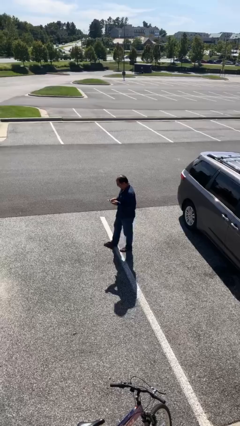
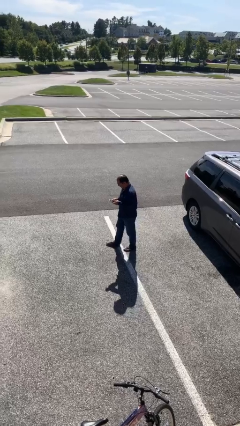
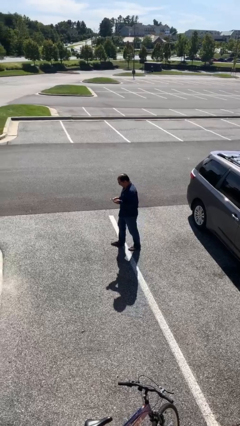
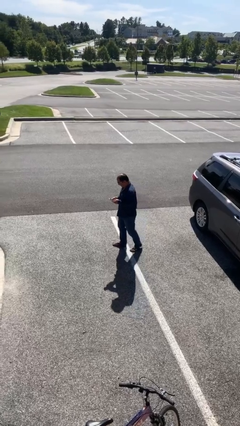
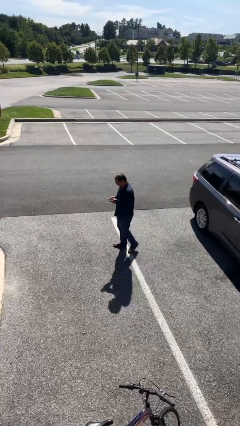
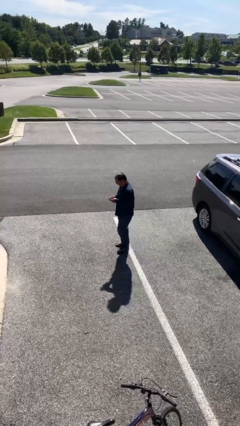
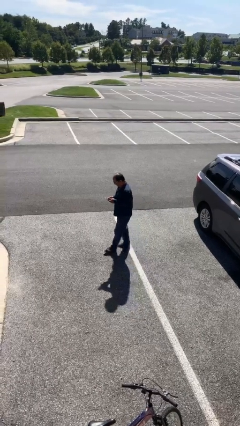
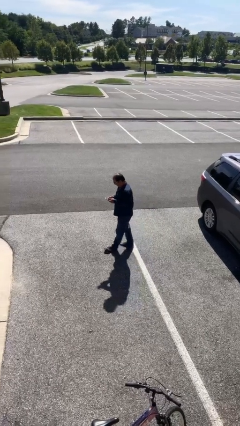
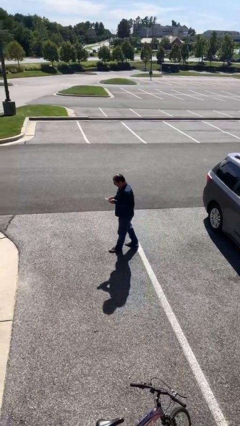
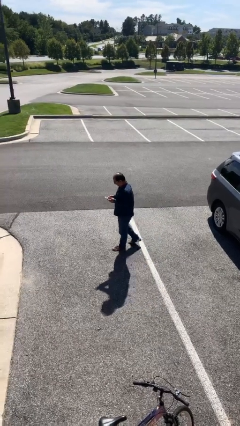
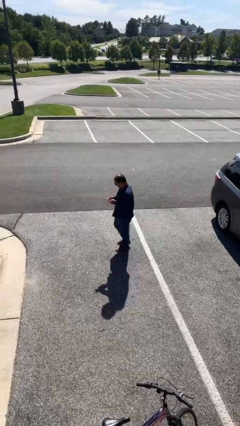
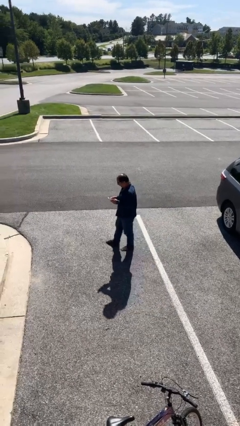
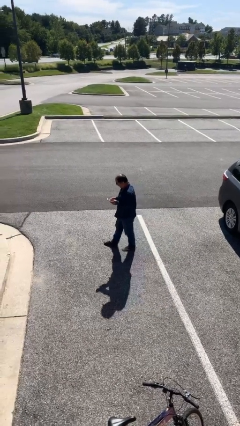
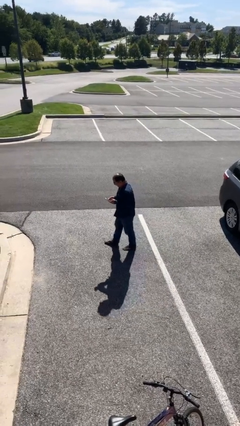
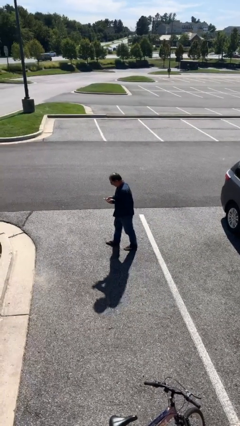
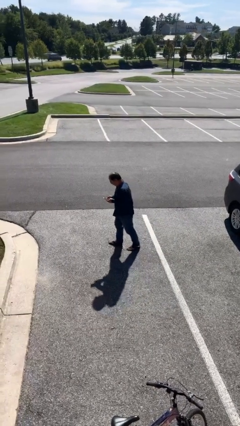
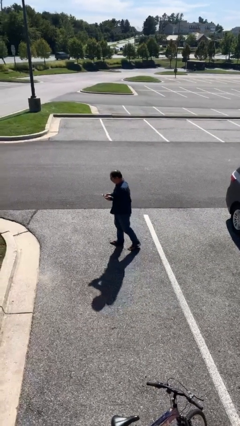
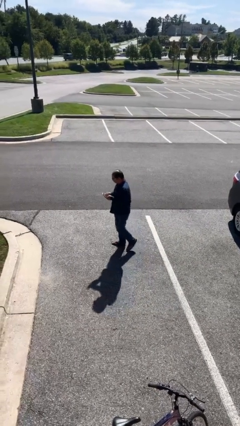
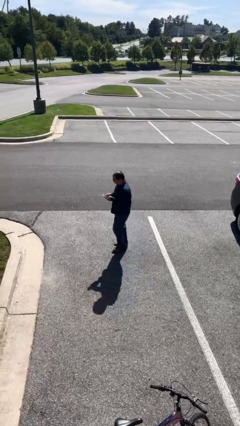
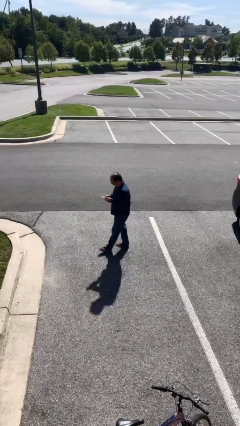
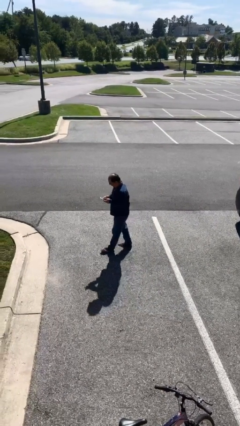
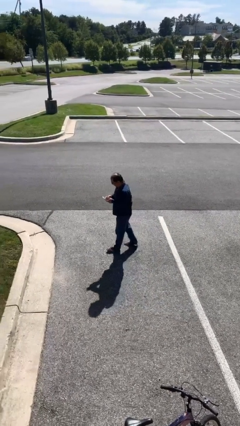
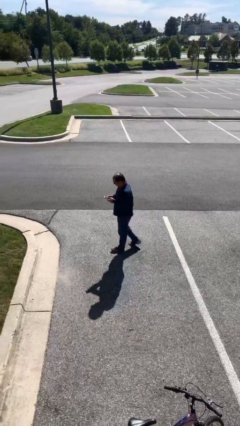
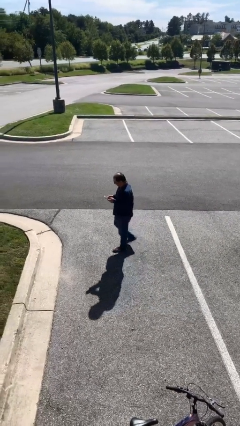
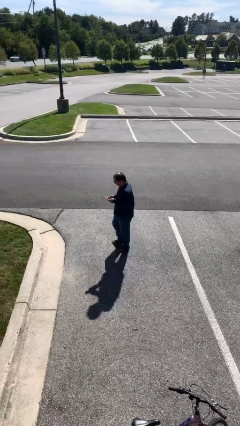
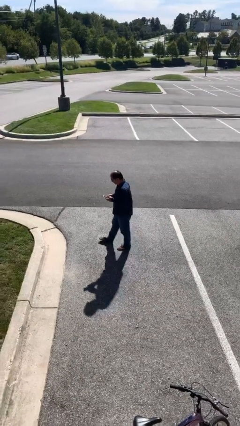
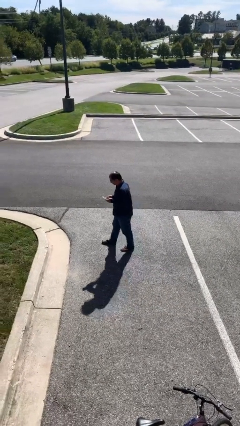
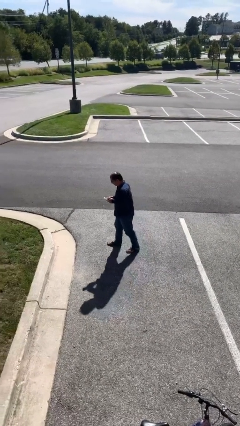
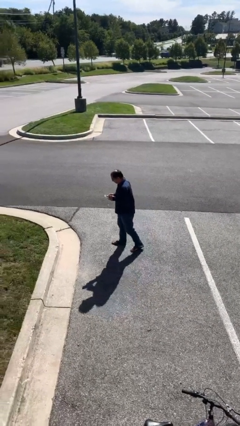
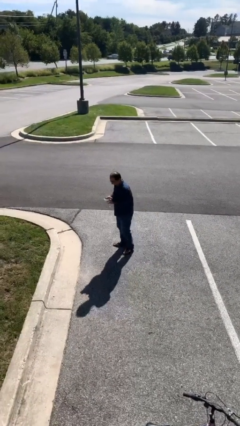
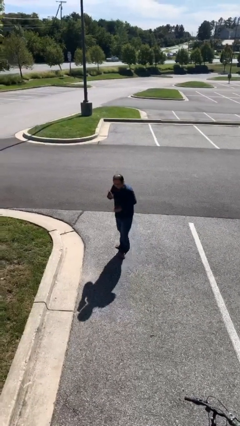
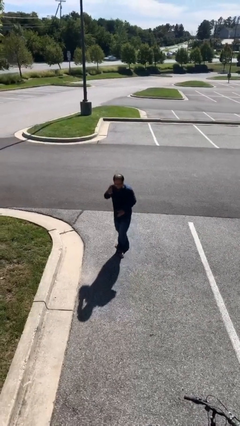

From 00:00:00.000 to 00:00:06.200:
person texts on phone

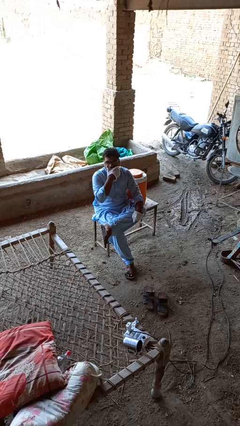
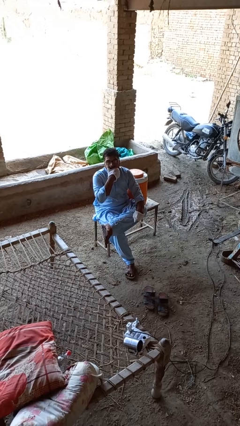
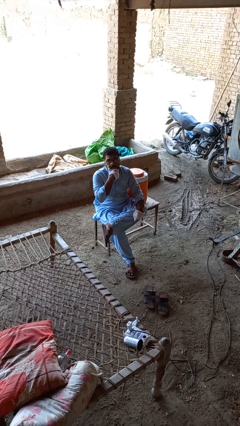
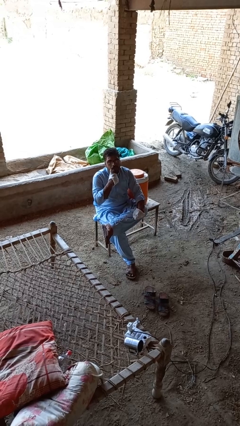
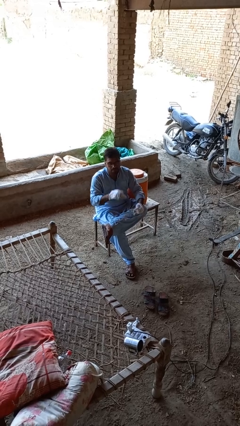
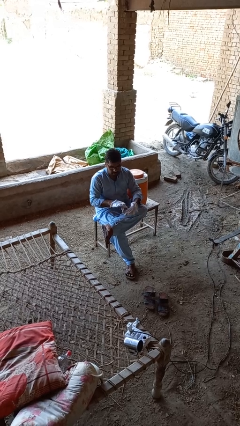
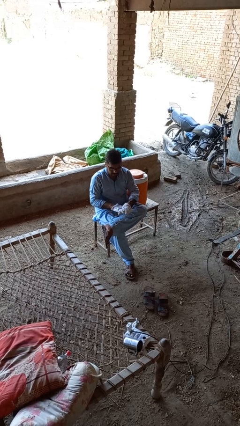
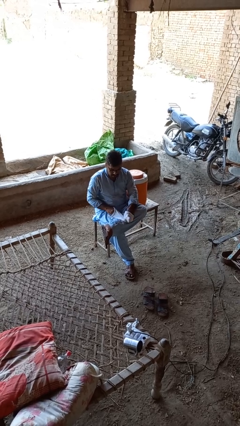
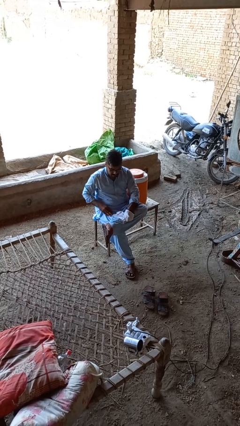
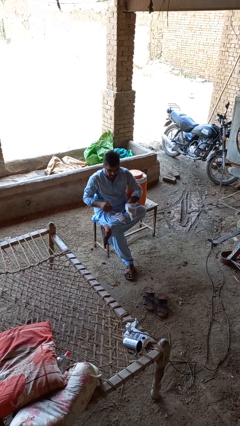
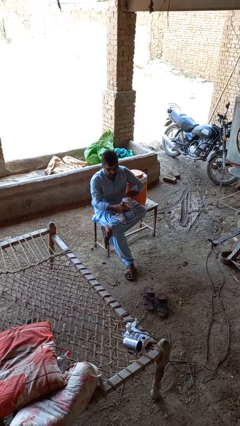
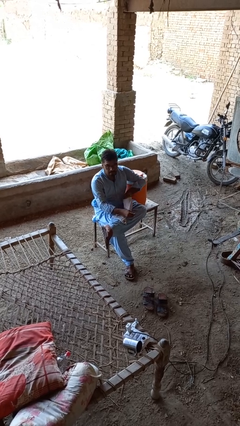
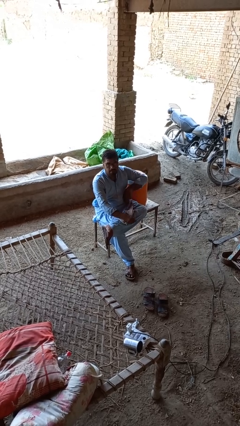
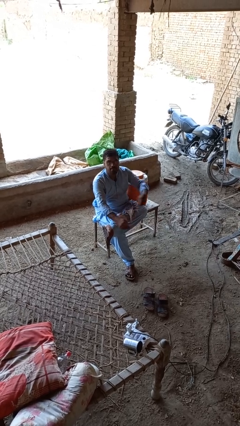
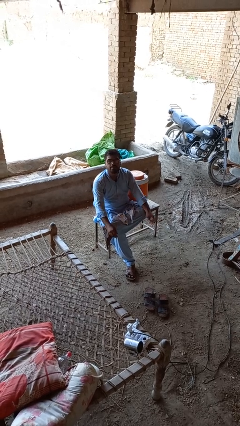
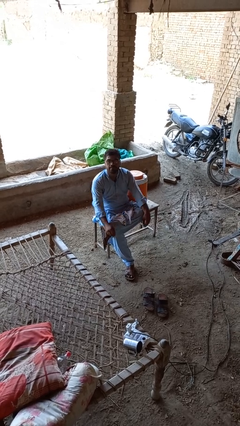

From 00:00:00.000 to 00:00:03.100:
person takes off gloves

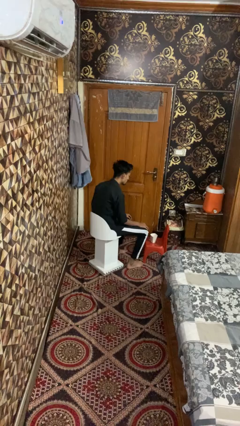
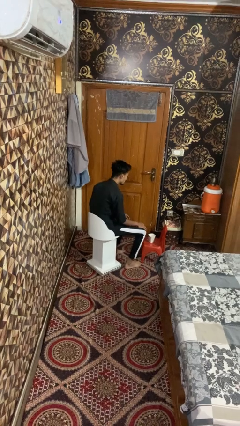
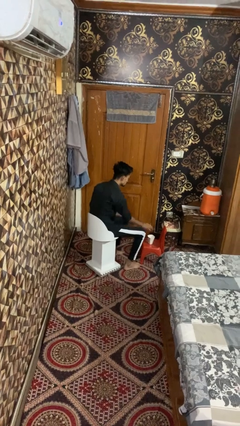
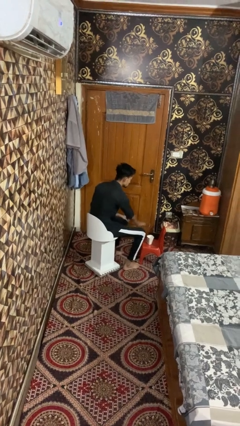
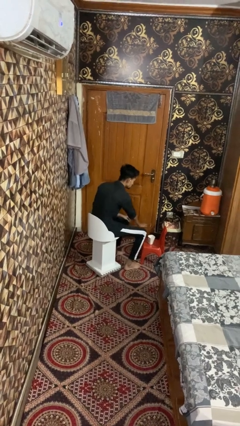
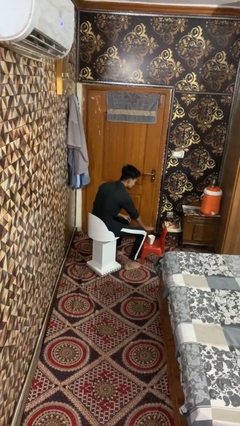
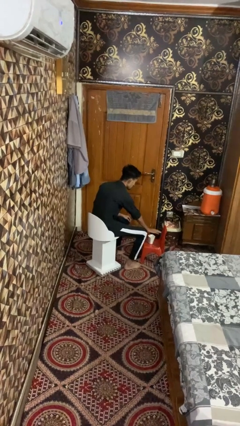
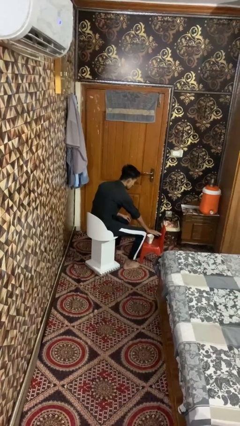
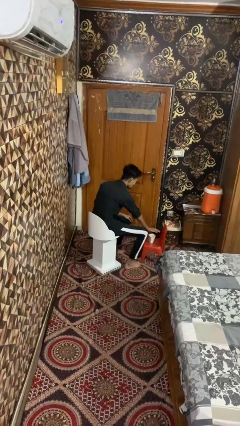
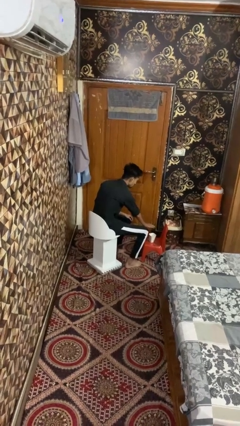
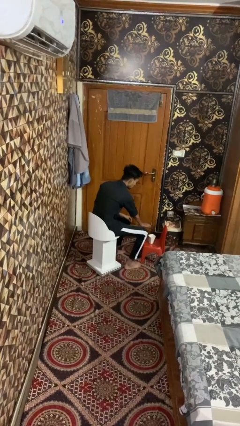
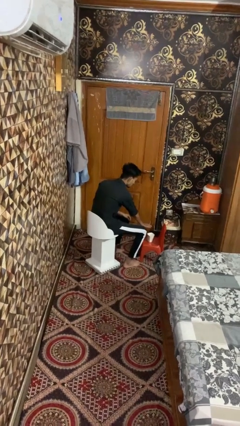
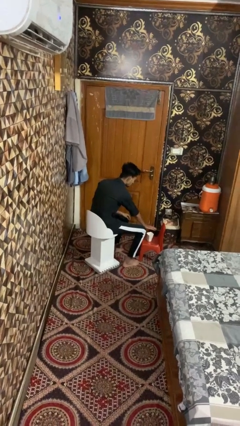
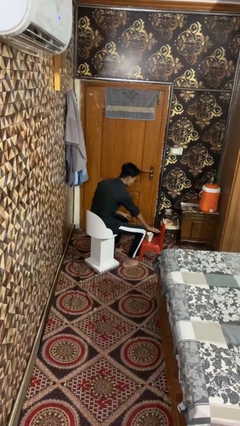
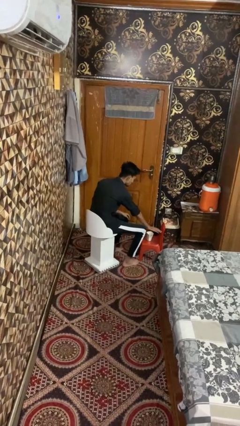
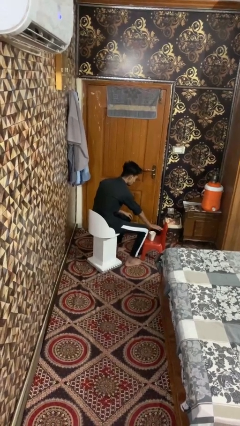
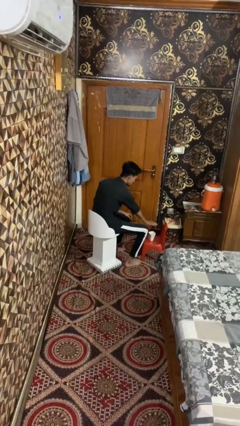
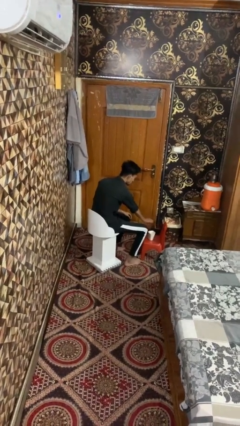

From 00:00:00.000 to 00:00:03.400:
person waves hand over object

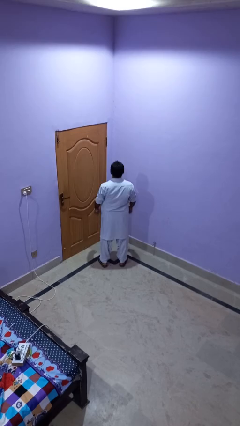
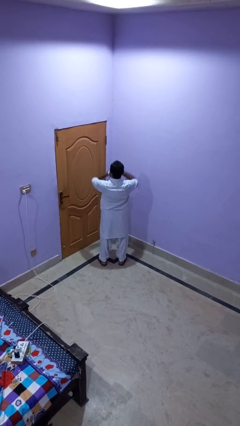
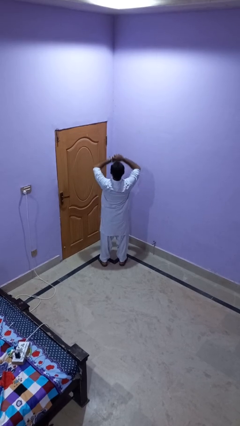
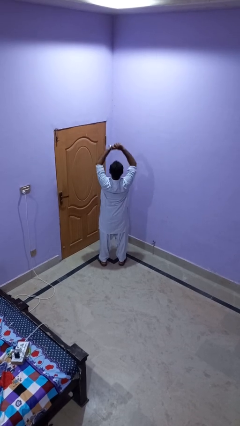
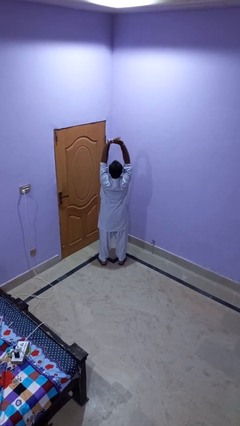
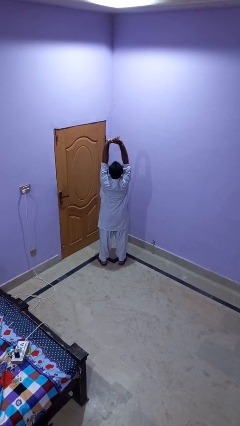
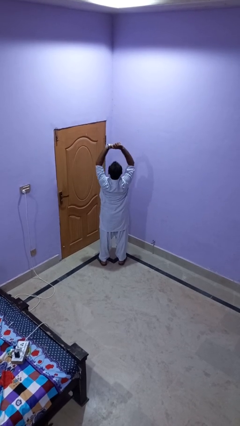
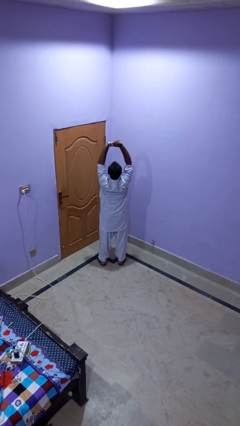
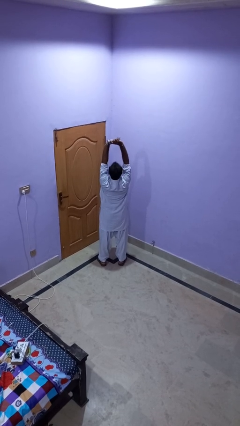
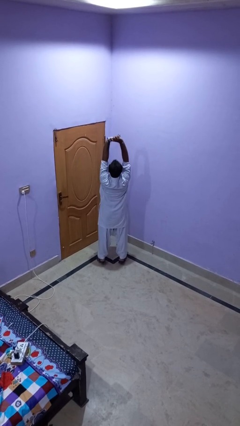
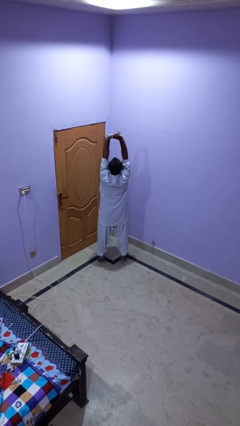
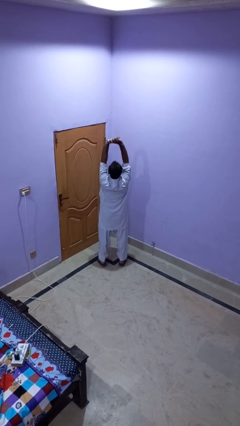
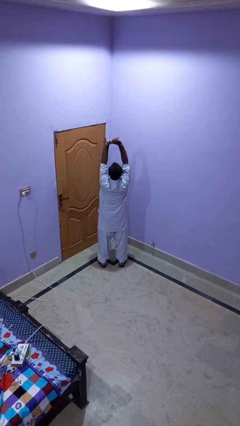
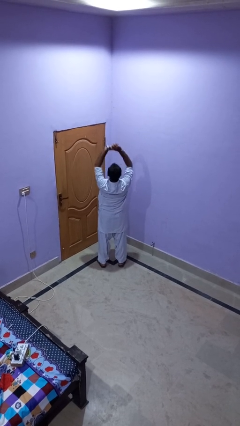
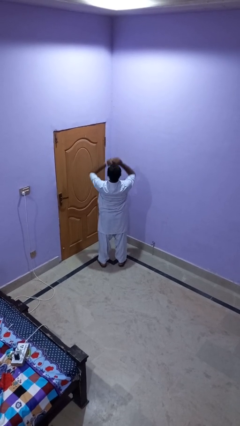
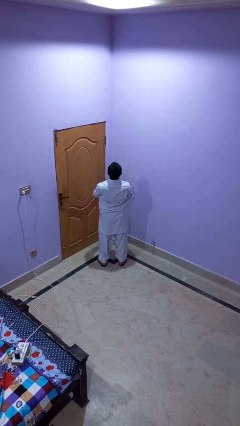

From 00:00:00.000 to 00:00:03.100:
person stretches arms over head

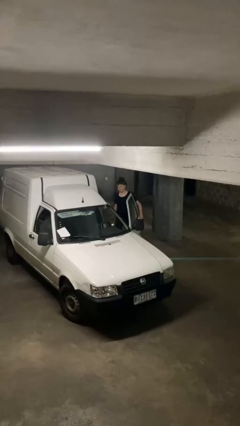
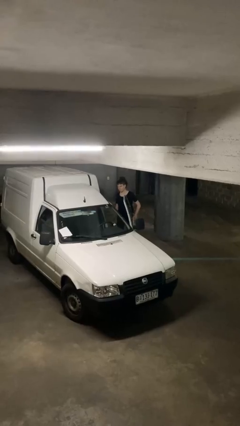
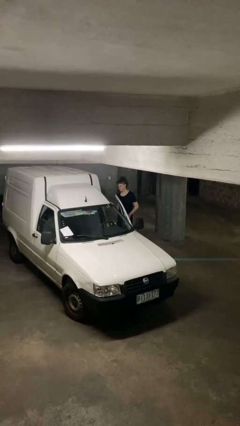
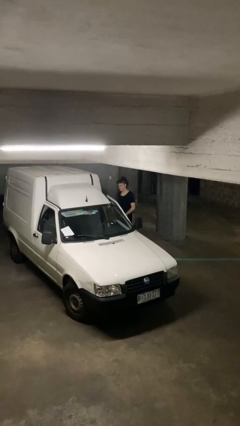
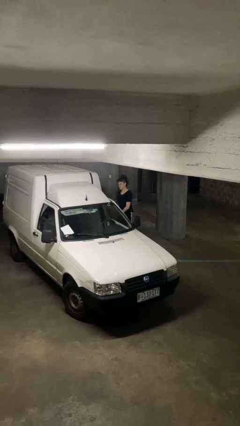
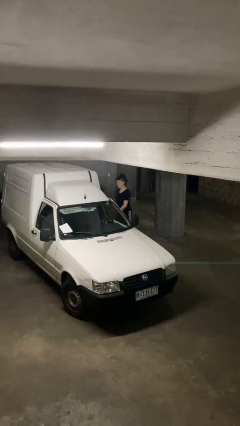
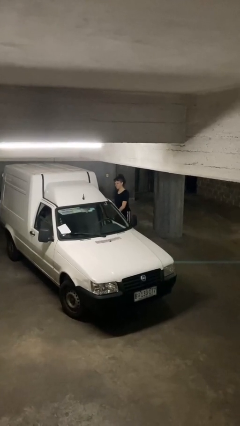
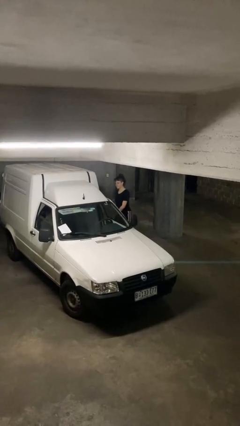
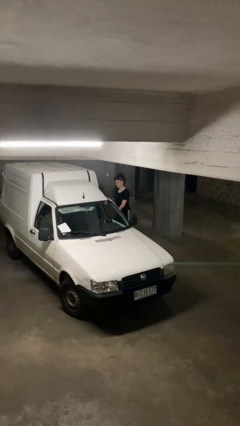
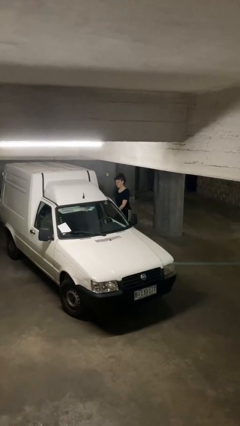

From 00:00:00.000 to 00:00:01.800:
person closes car door
